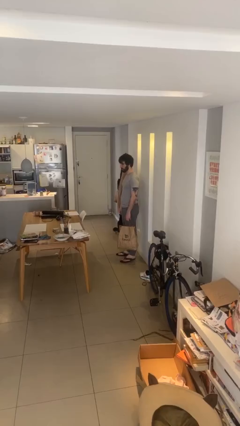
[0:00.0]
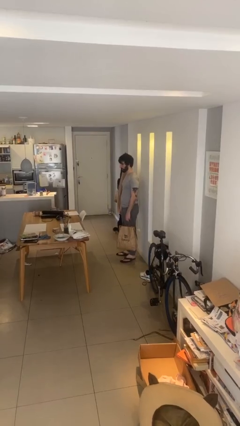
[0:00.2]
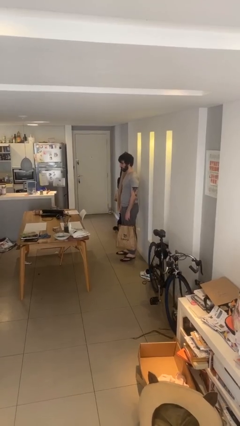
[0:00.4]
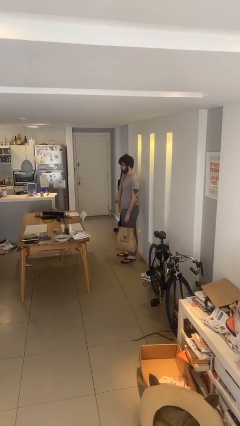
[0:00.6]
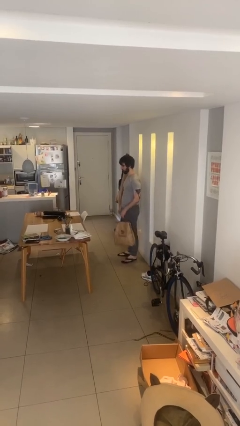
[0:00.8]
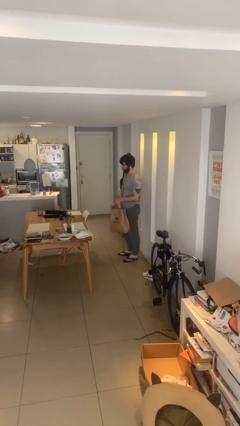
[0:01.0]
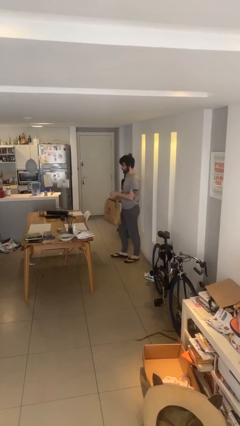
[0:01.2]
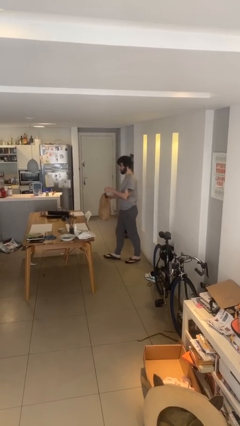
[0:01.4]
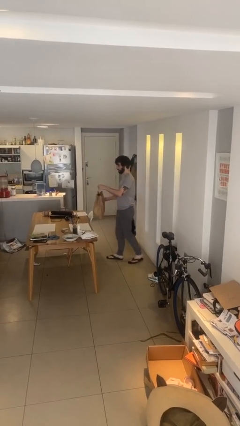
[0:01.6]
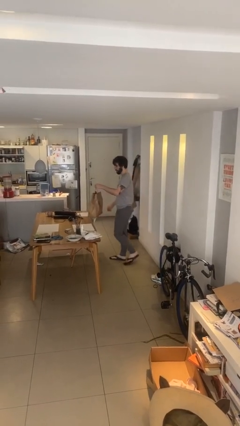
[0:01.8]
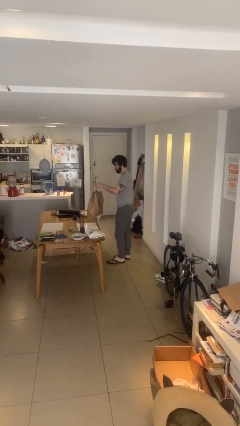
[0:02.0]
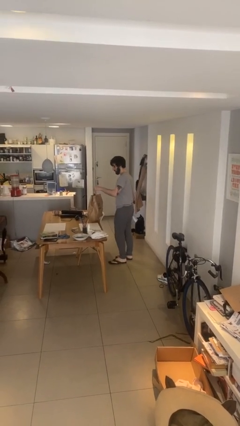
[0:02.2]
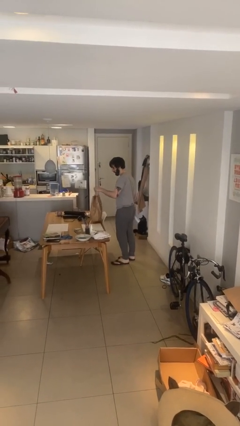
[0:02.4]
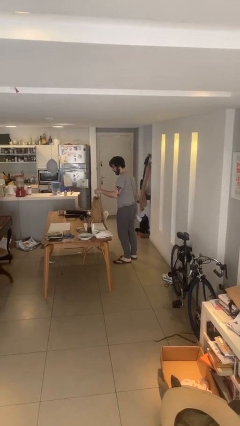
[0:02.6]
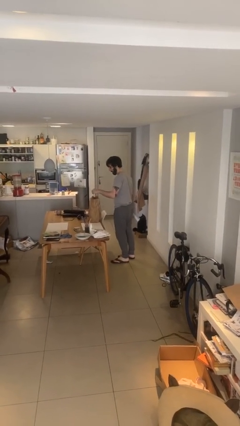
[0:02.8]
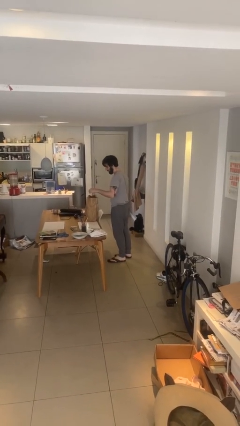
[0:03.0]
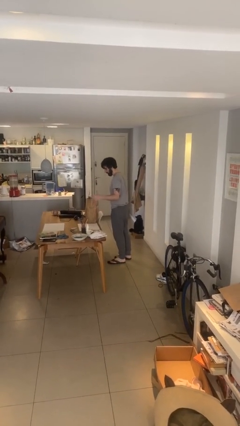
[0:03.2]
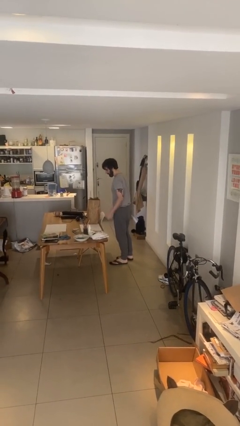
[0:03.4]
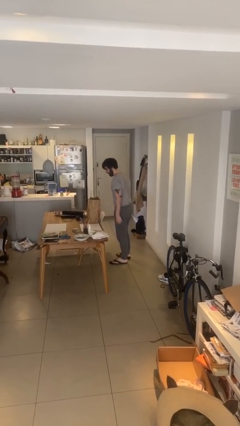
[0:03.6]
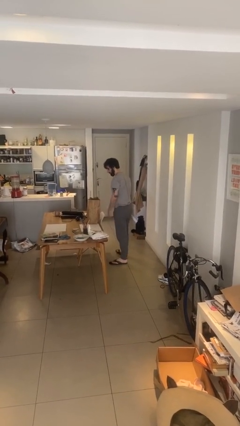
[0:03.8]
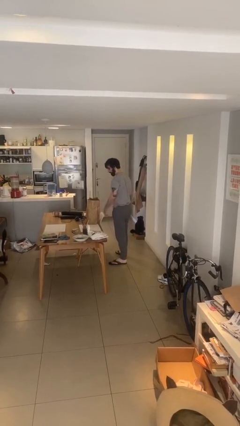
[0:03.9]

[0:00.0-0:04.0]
person puts down object on table

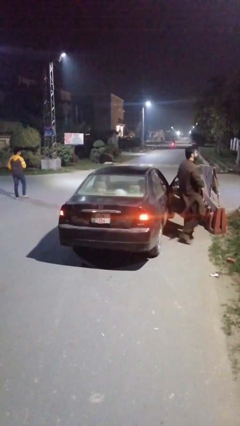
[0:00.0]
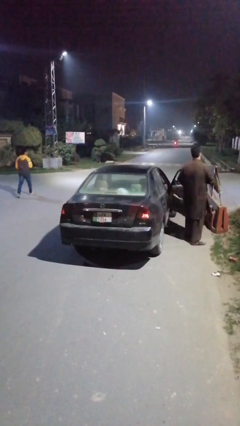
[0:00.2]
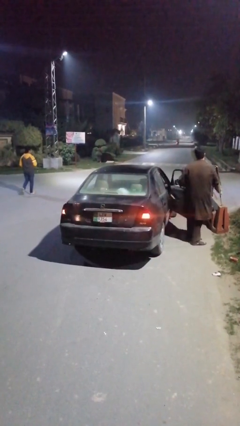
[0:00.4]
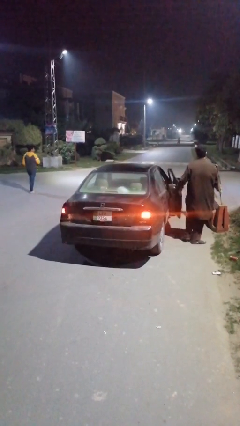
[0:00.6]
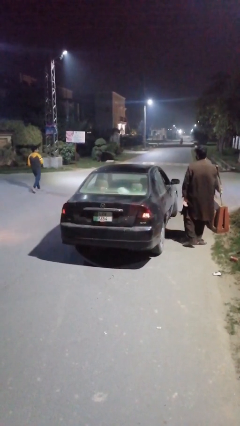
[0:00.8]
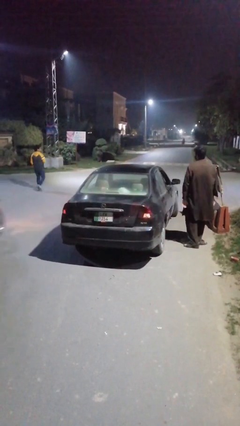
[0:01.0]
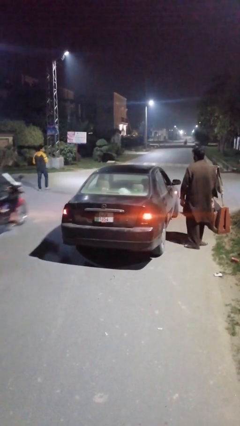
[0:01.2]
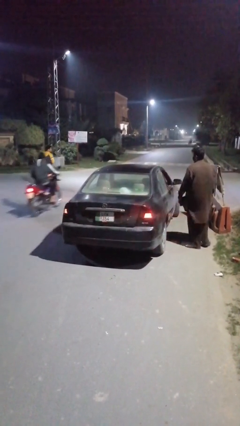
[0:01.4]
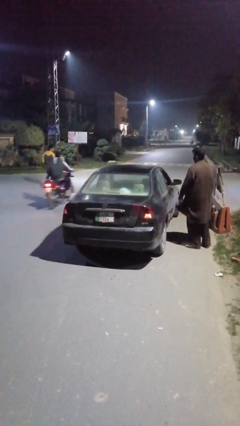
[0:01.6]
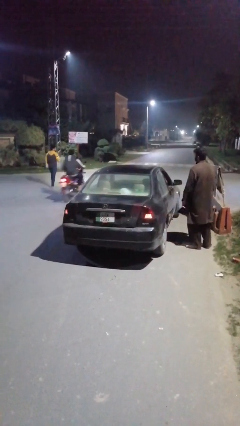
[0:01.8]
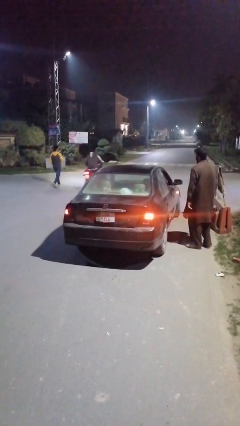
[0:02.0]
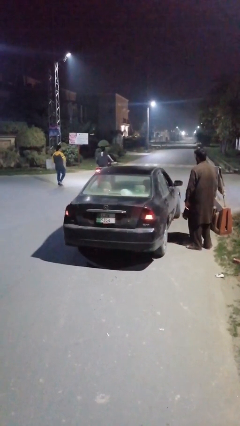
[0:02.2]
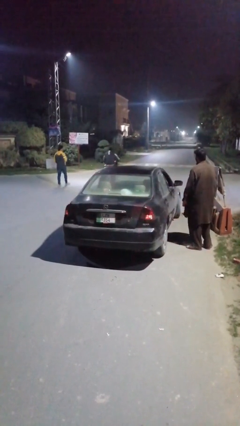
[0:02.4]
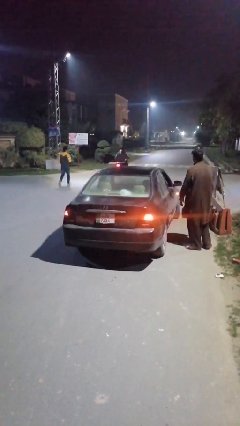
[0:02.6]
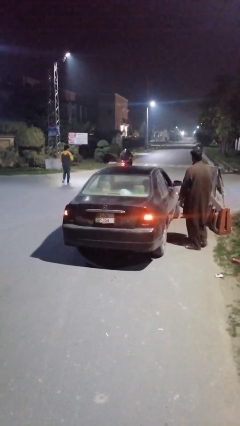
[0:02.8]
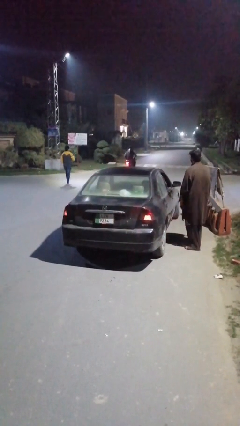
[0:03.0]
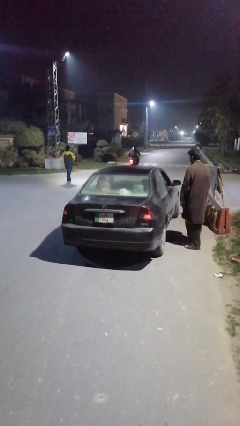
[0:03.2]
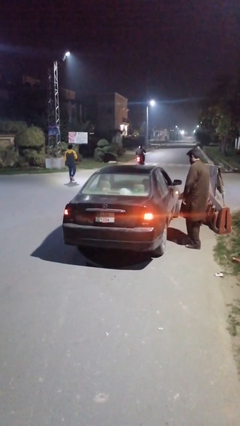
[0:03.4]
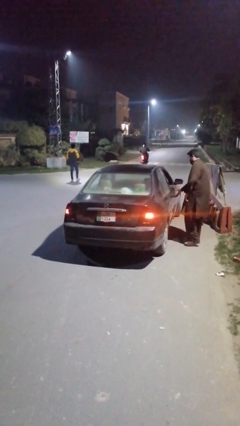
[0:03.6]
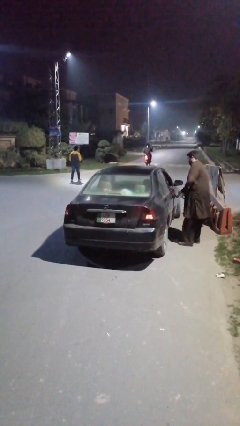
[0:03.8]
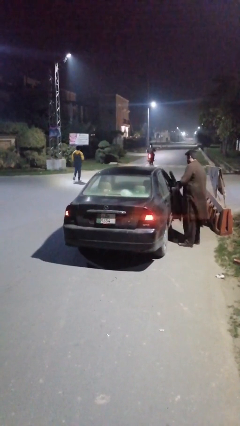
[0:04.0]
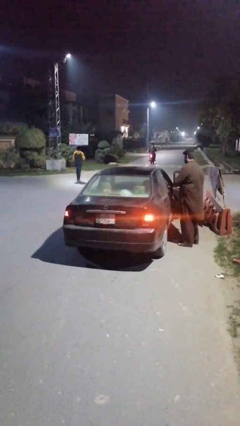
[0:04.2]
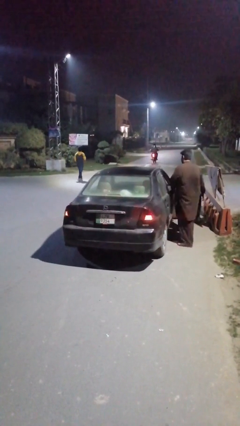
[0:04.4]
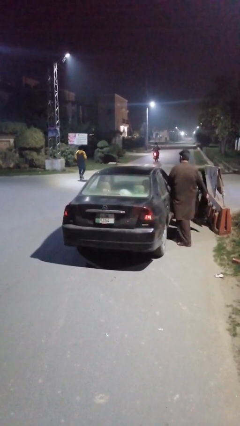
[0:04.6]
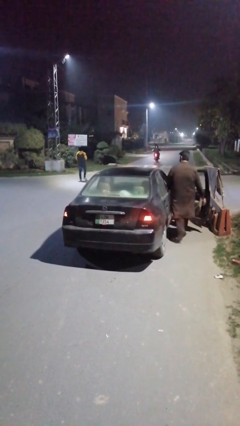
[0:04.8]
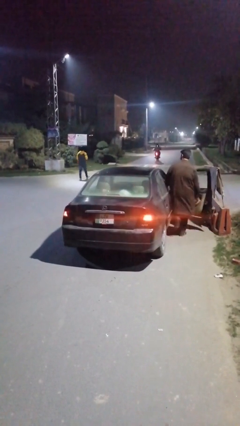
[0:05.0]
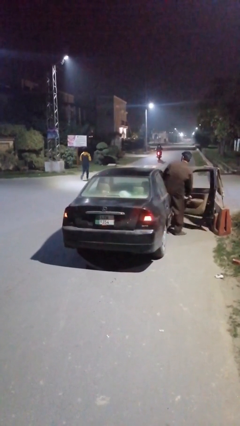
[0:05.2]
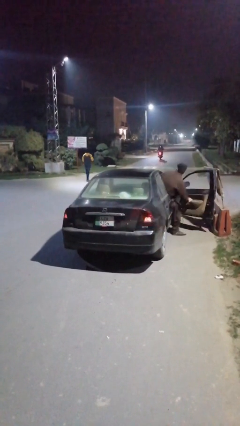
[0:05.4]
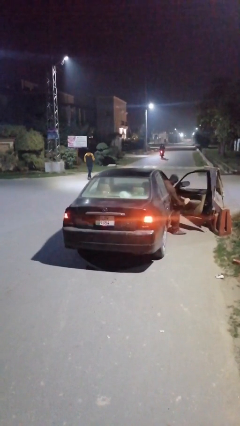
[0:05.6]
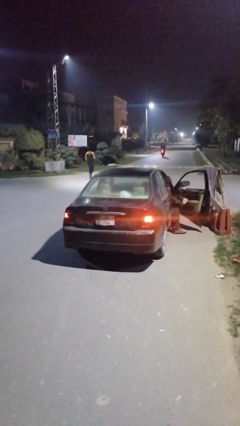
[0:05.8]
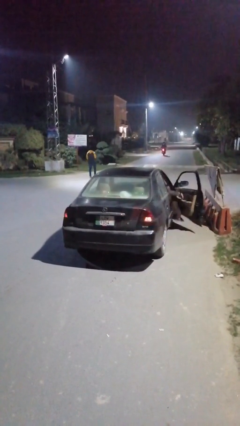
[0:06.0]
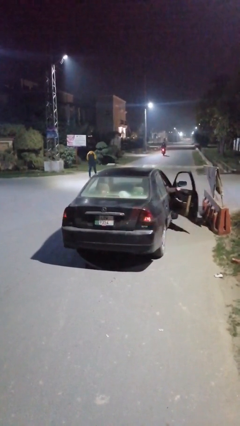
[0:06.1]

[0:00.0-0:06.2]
car drops off person

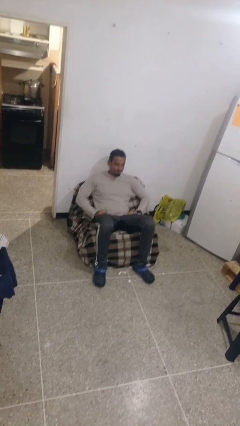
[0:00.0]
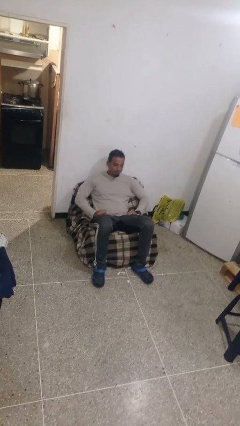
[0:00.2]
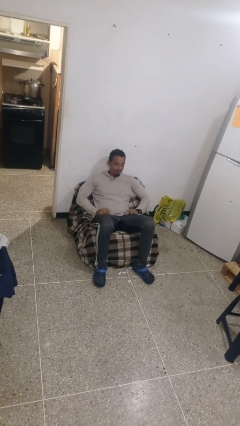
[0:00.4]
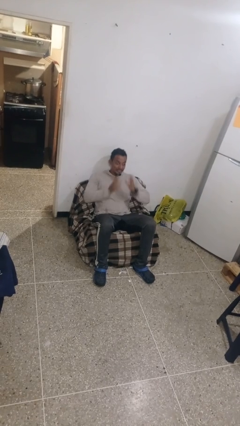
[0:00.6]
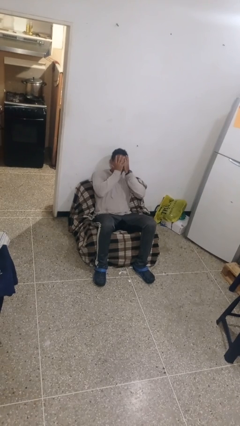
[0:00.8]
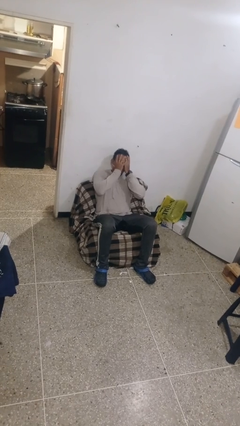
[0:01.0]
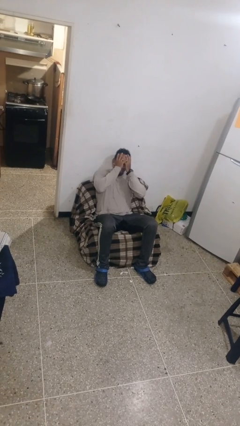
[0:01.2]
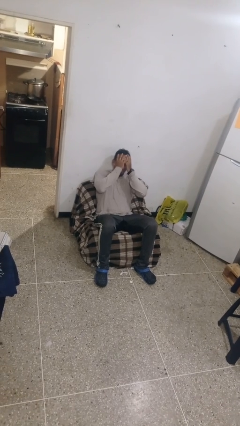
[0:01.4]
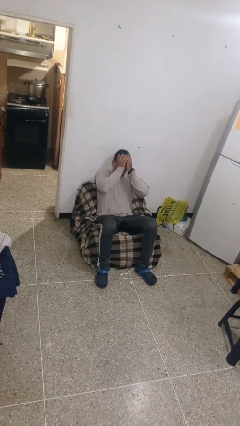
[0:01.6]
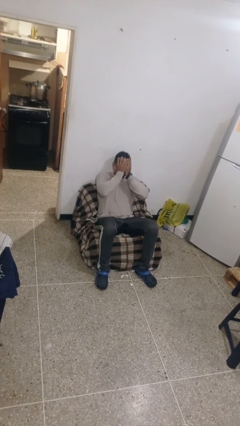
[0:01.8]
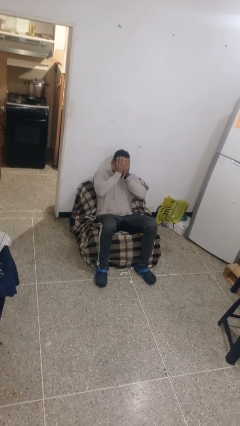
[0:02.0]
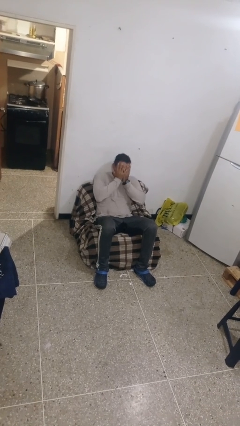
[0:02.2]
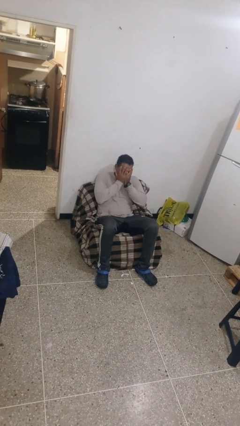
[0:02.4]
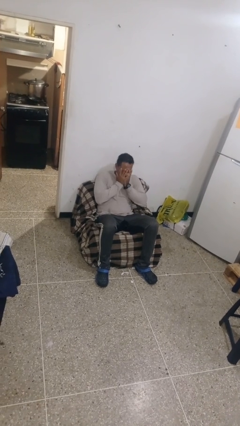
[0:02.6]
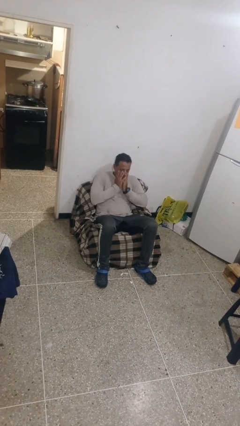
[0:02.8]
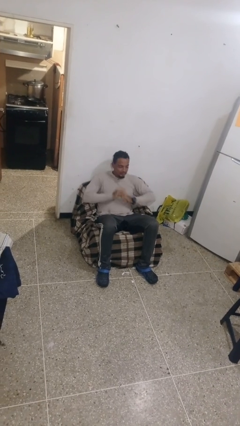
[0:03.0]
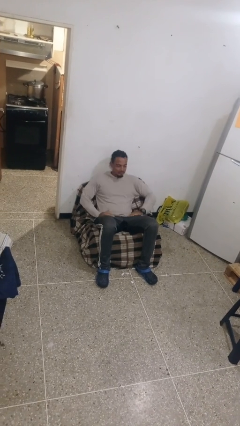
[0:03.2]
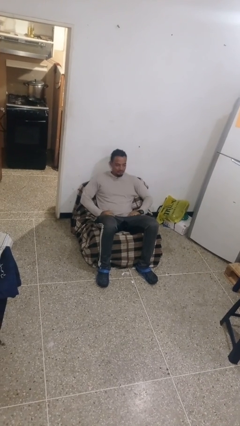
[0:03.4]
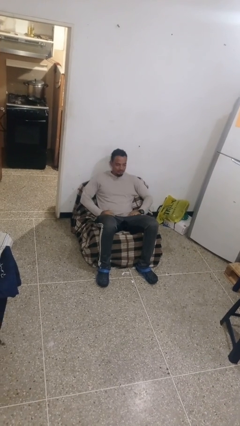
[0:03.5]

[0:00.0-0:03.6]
person covers face with hands

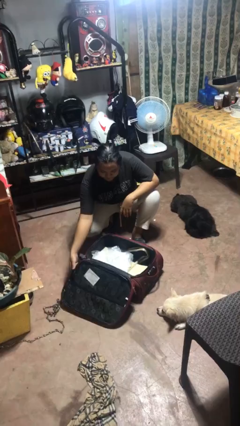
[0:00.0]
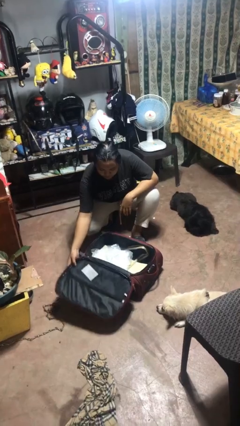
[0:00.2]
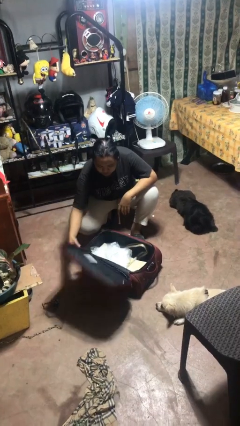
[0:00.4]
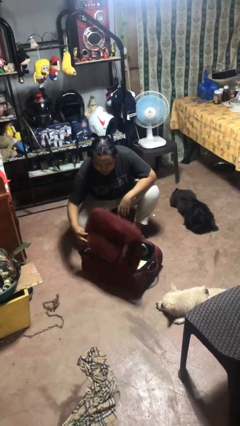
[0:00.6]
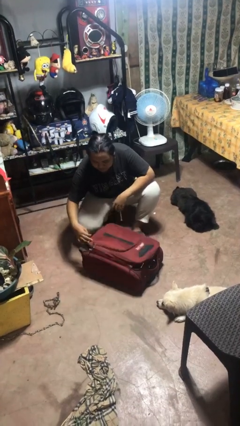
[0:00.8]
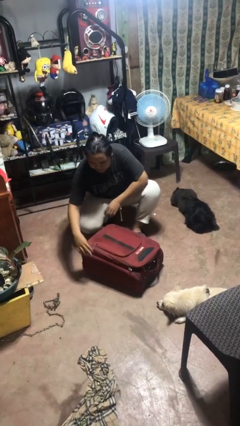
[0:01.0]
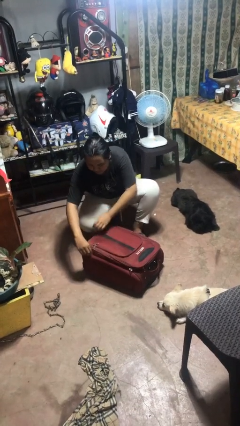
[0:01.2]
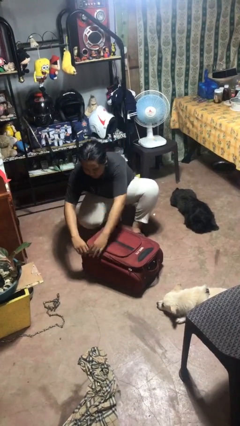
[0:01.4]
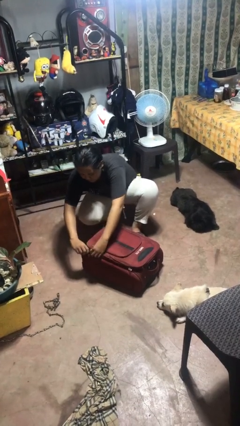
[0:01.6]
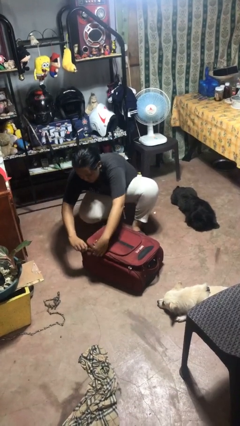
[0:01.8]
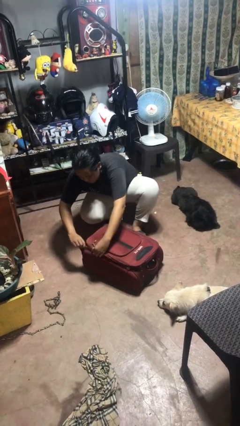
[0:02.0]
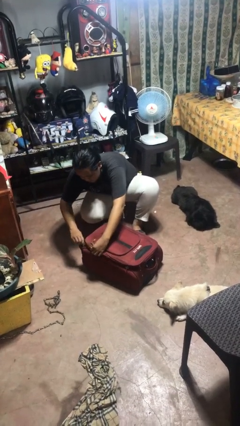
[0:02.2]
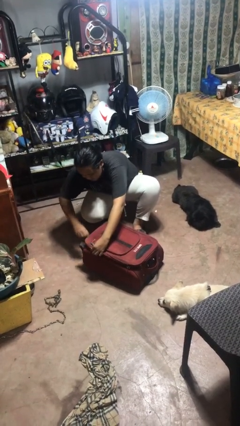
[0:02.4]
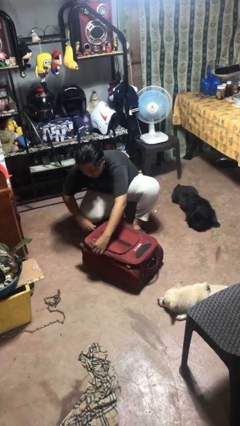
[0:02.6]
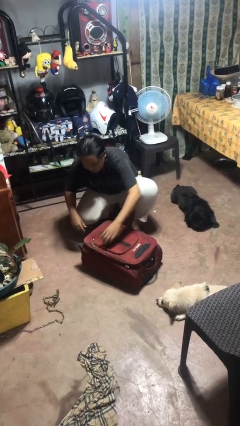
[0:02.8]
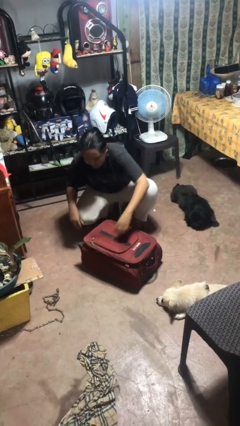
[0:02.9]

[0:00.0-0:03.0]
person closes suitcase

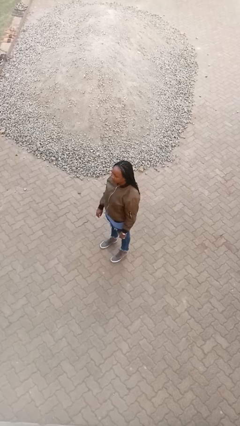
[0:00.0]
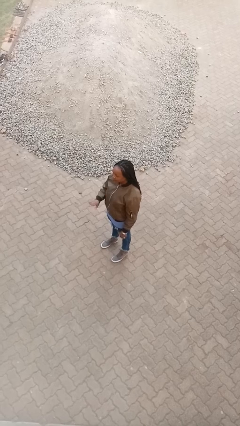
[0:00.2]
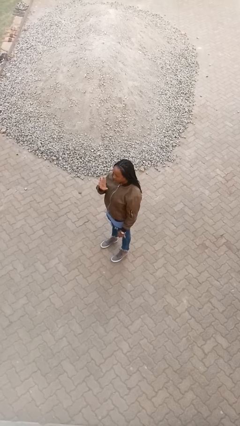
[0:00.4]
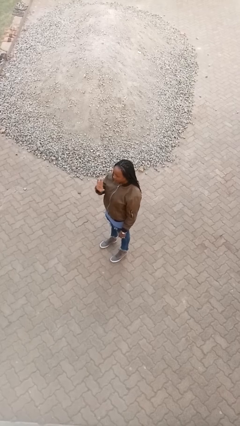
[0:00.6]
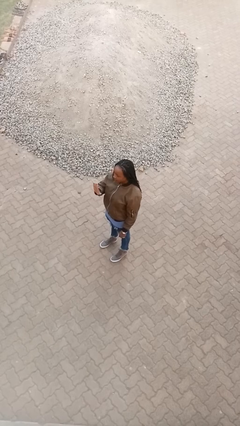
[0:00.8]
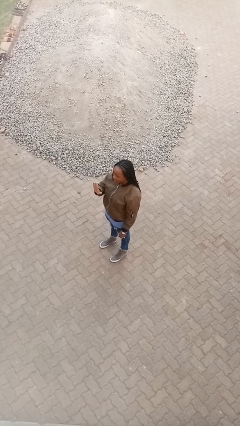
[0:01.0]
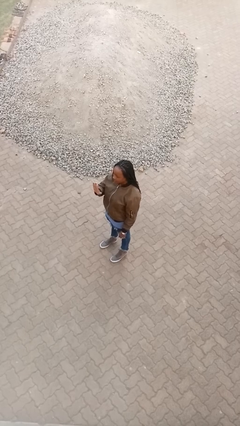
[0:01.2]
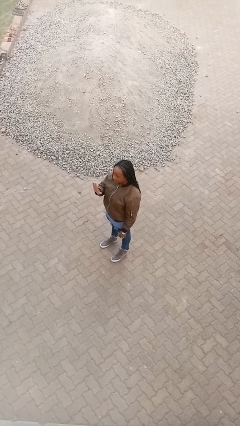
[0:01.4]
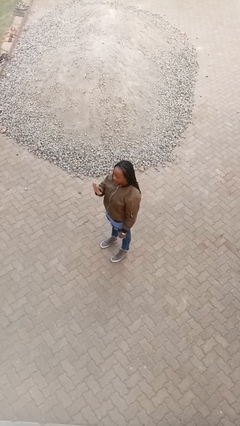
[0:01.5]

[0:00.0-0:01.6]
person gestures stop
